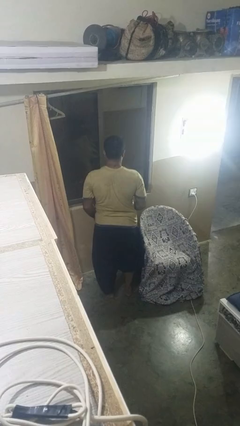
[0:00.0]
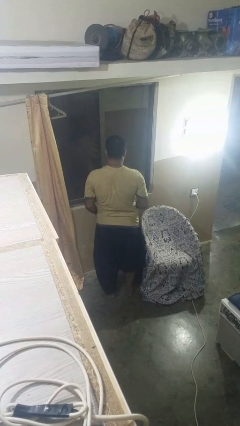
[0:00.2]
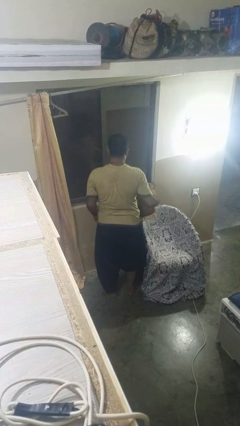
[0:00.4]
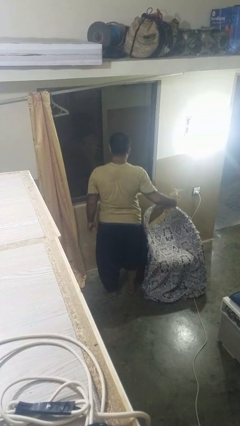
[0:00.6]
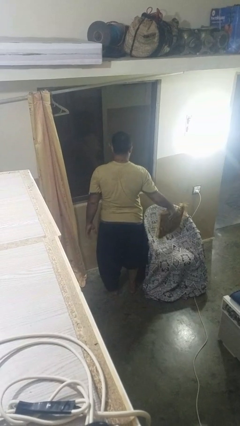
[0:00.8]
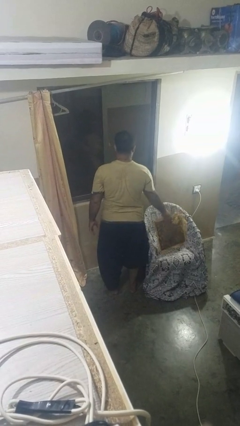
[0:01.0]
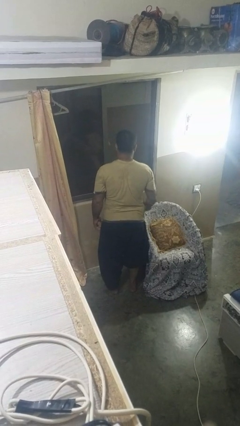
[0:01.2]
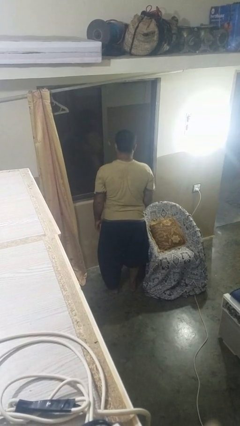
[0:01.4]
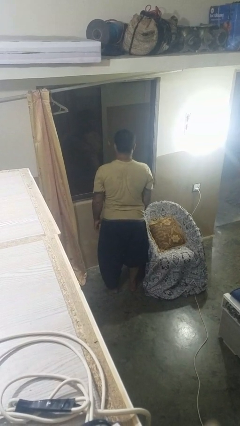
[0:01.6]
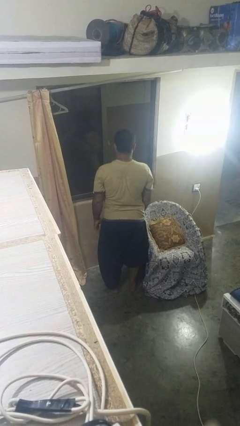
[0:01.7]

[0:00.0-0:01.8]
person puts down object on couch

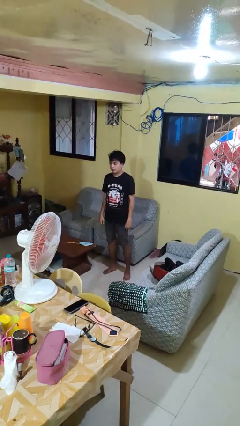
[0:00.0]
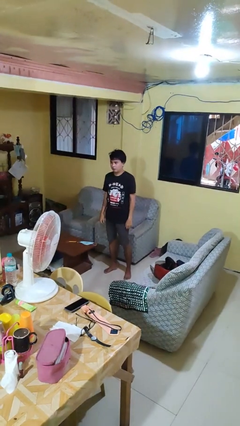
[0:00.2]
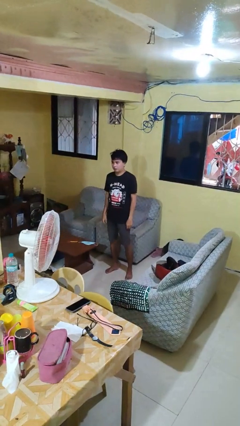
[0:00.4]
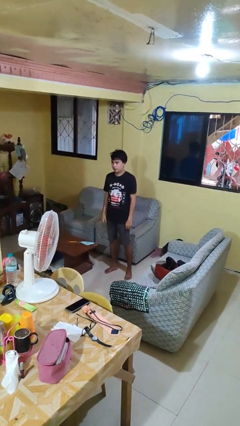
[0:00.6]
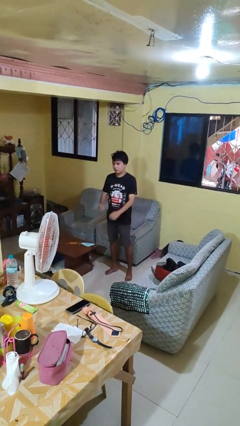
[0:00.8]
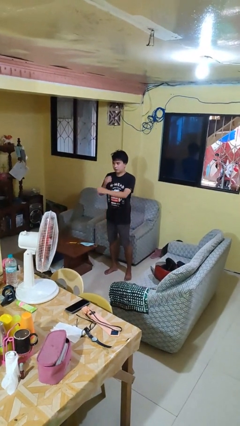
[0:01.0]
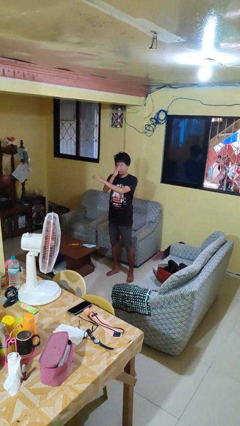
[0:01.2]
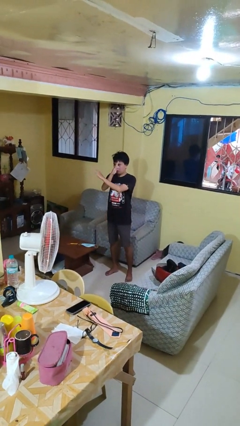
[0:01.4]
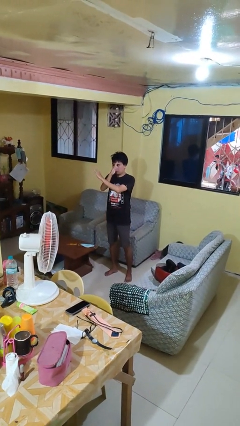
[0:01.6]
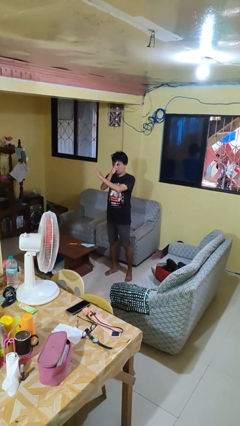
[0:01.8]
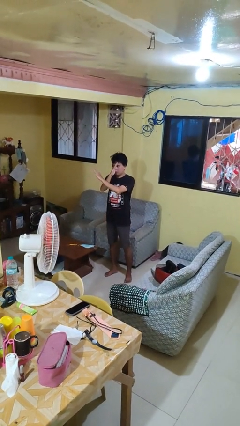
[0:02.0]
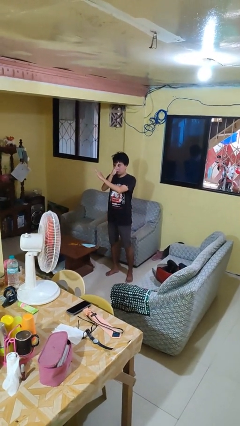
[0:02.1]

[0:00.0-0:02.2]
person gestures arms x

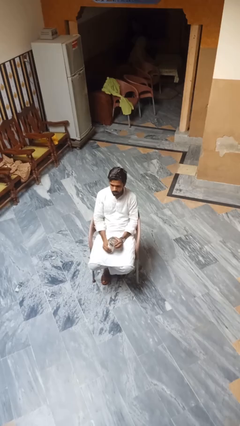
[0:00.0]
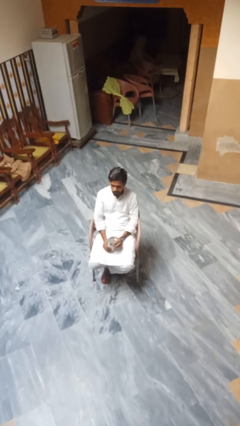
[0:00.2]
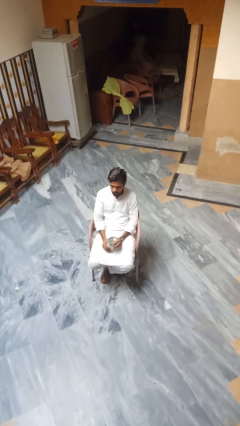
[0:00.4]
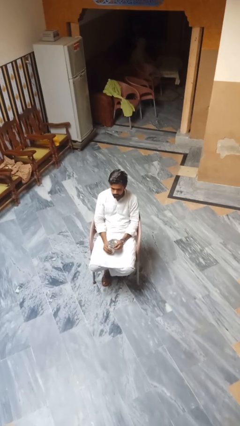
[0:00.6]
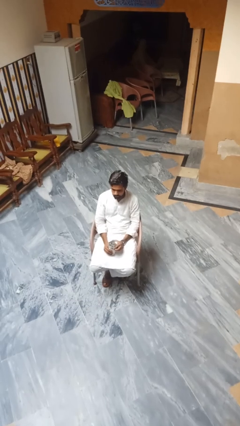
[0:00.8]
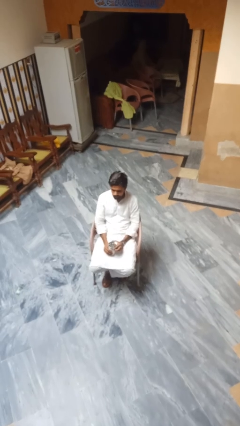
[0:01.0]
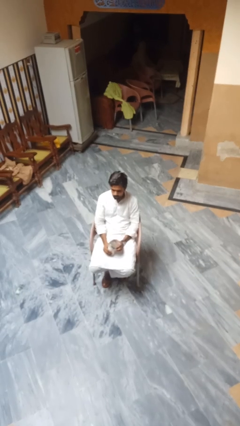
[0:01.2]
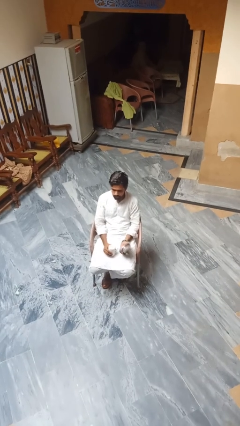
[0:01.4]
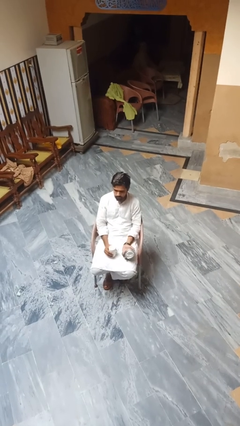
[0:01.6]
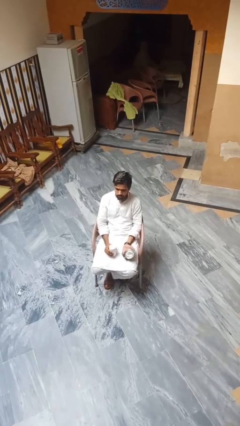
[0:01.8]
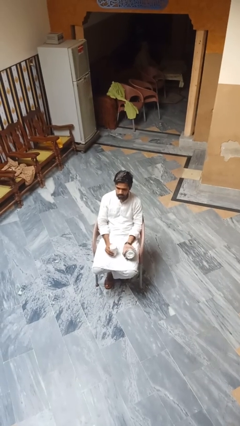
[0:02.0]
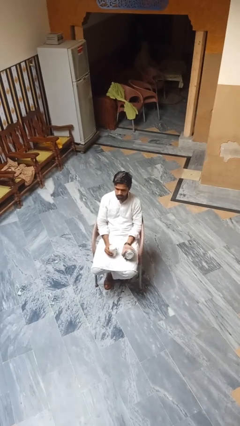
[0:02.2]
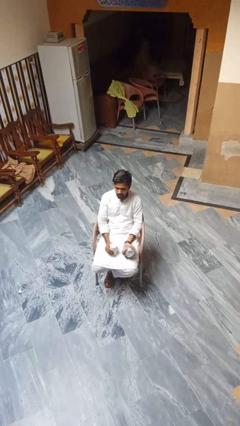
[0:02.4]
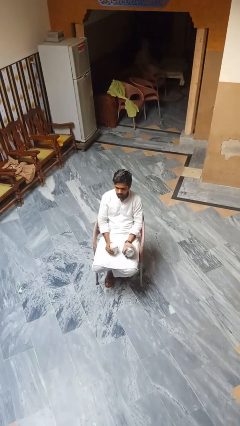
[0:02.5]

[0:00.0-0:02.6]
person opens beverage can

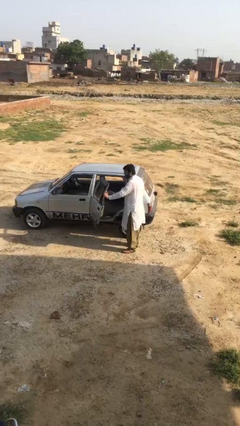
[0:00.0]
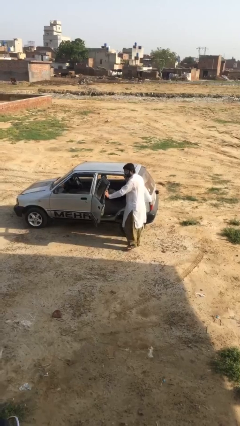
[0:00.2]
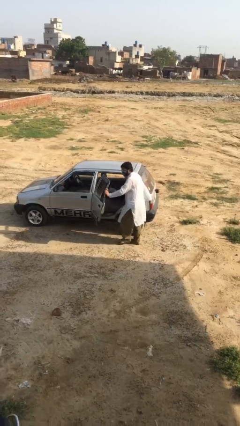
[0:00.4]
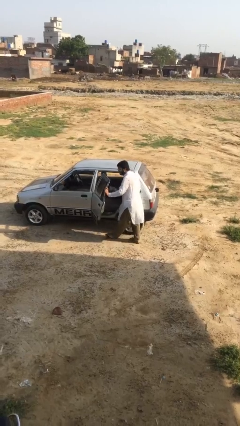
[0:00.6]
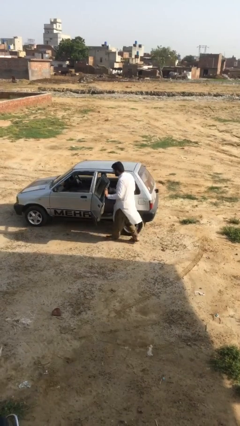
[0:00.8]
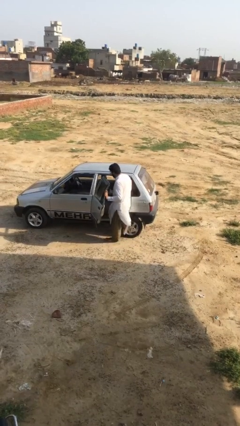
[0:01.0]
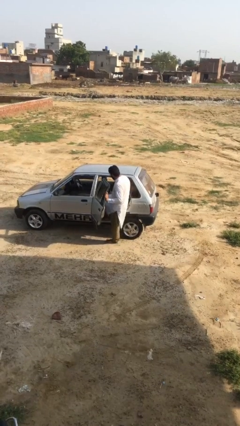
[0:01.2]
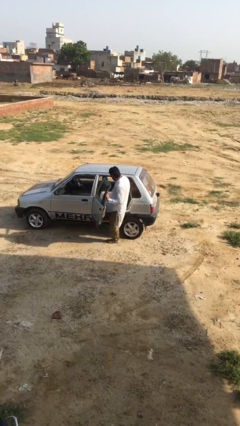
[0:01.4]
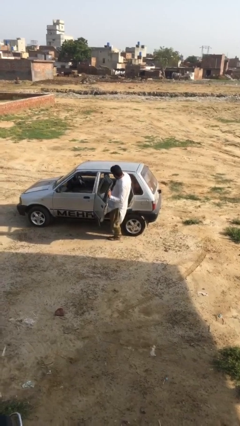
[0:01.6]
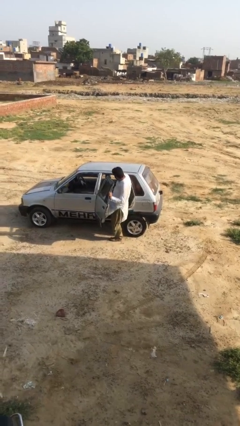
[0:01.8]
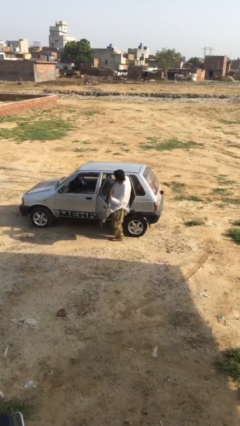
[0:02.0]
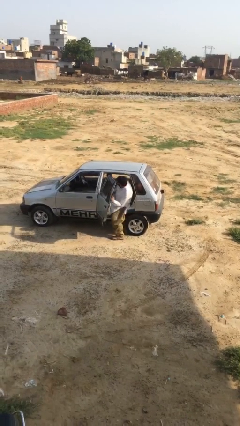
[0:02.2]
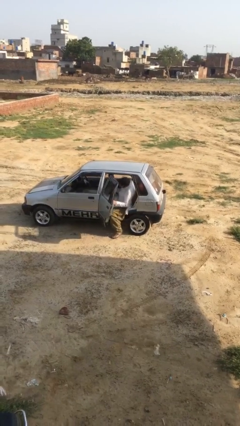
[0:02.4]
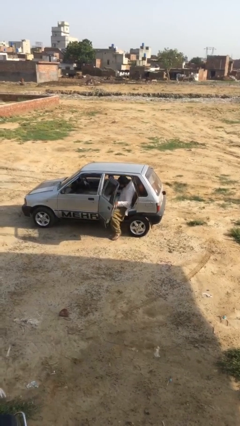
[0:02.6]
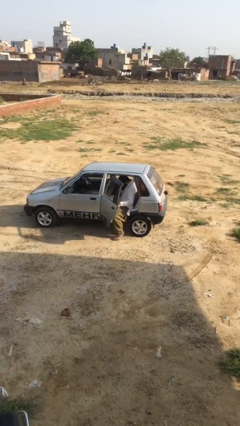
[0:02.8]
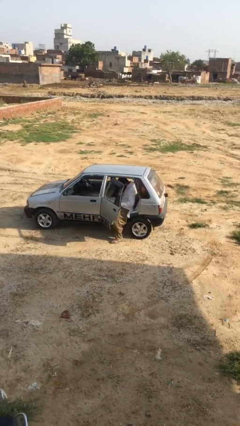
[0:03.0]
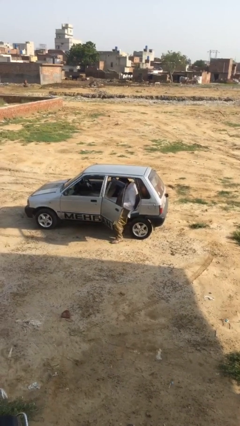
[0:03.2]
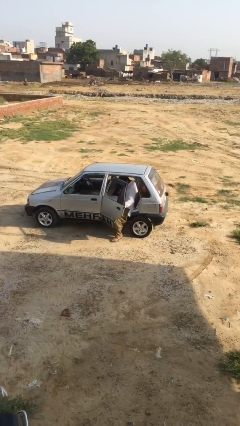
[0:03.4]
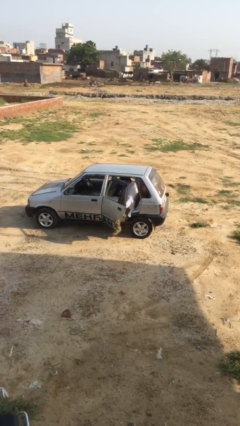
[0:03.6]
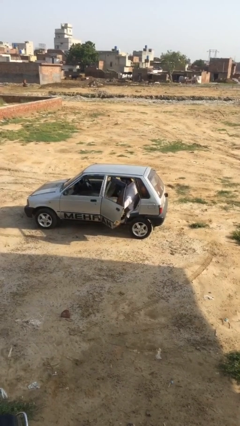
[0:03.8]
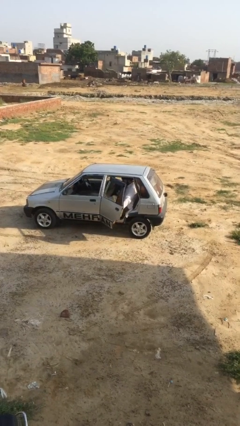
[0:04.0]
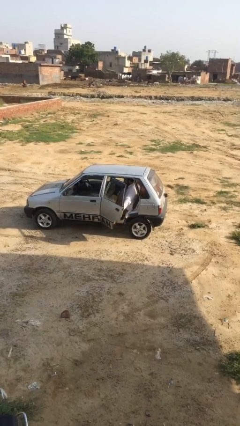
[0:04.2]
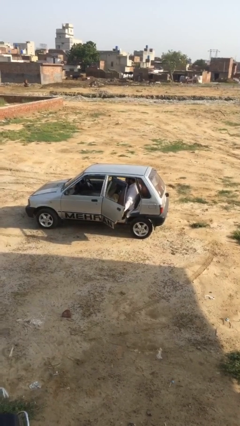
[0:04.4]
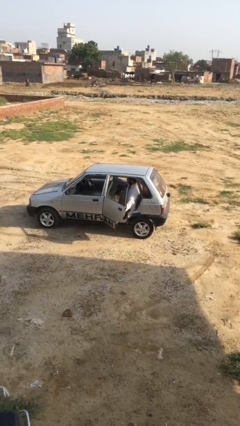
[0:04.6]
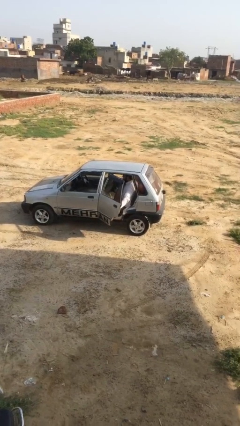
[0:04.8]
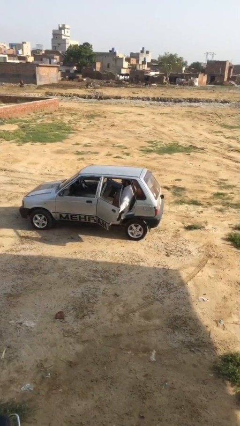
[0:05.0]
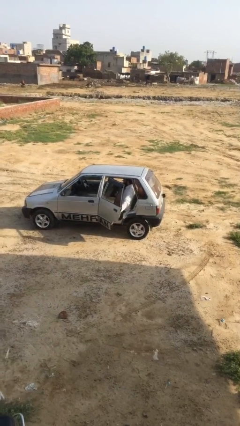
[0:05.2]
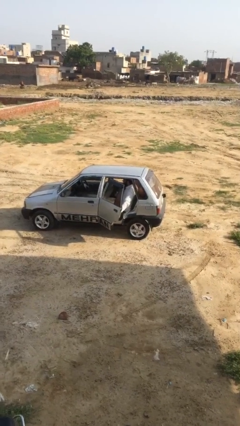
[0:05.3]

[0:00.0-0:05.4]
person enters car

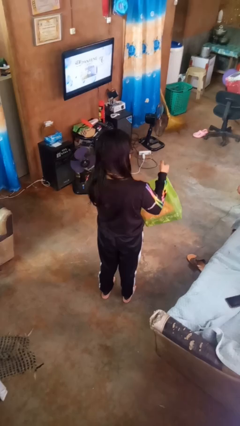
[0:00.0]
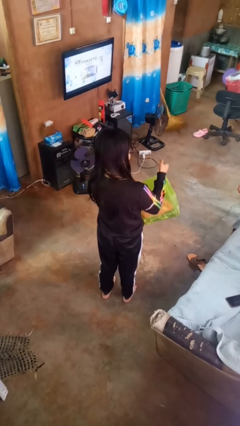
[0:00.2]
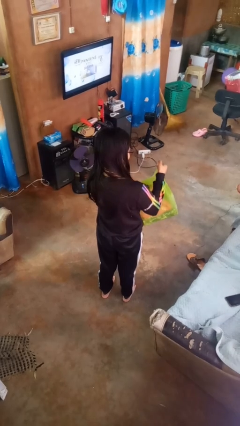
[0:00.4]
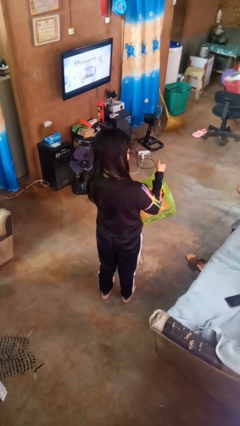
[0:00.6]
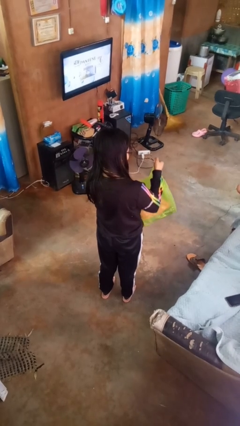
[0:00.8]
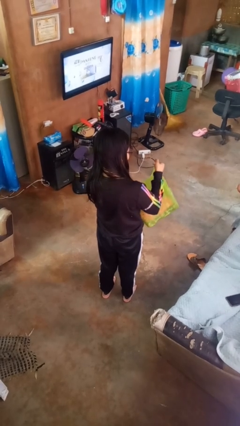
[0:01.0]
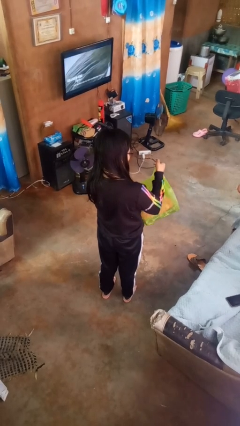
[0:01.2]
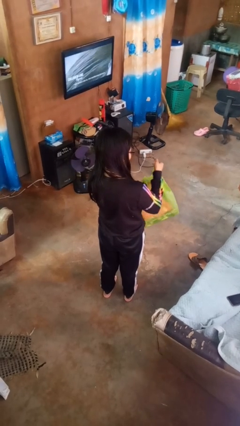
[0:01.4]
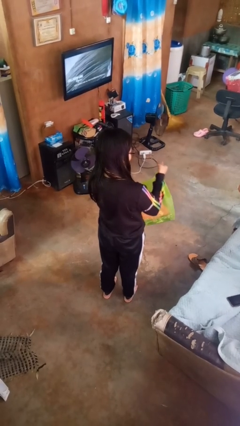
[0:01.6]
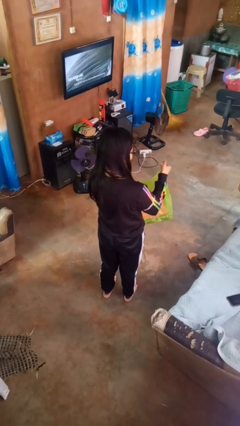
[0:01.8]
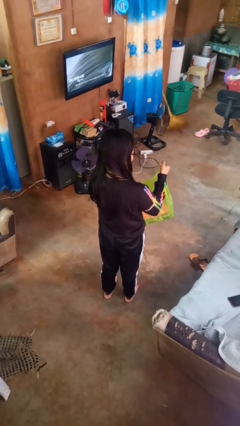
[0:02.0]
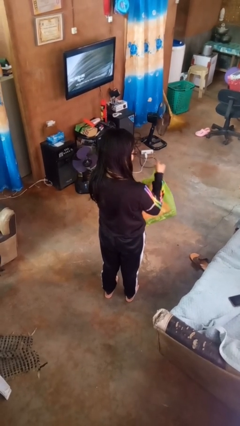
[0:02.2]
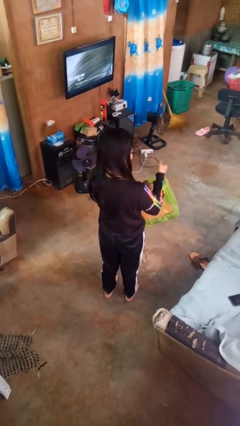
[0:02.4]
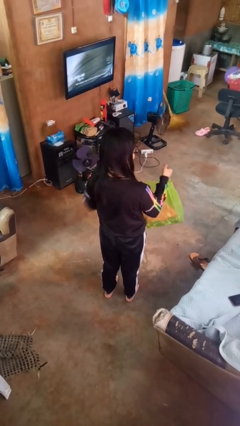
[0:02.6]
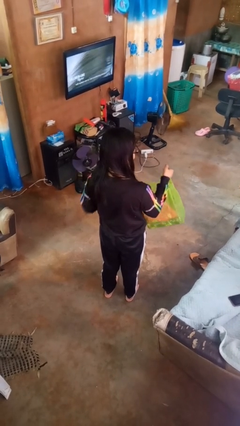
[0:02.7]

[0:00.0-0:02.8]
person searches in bag

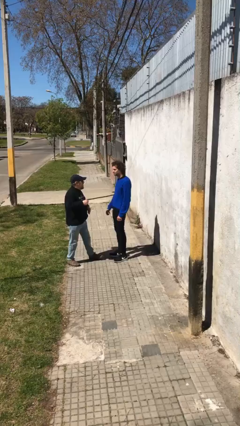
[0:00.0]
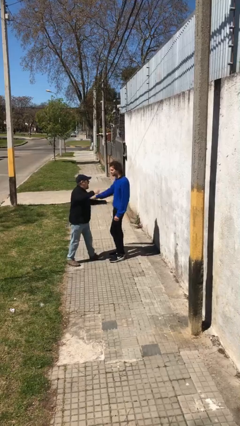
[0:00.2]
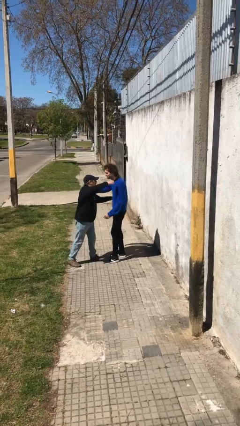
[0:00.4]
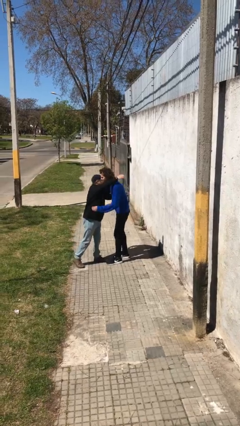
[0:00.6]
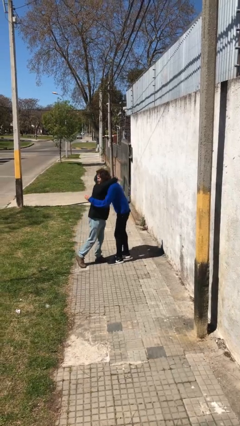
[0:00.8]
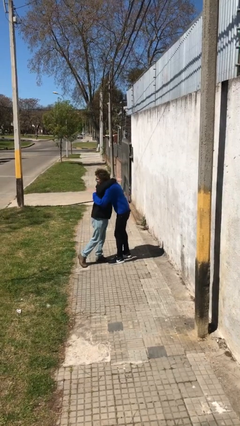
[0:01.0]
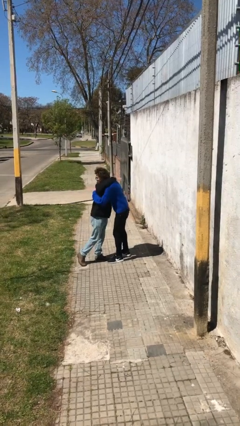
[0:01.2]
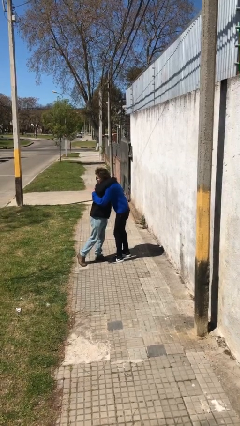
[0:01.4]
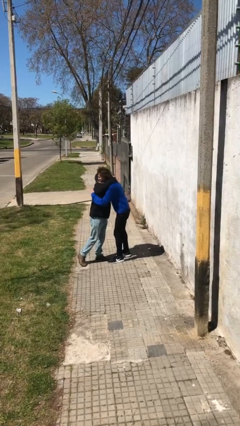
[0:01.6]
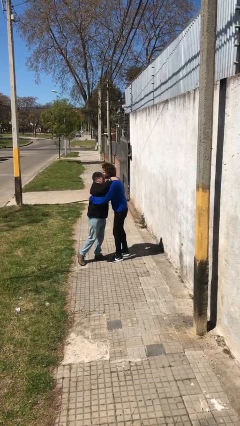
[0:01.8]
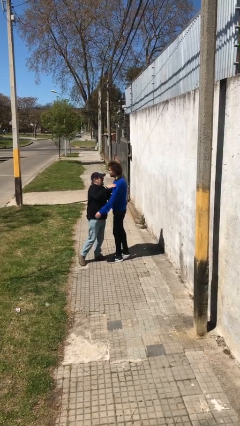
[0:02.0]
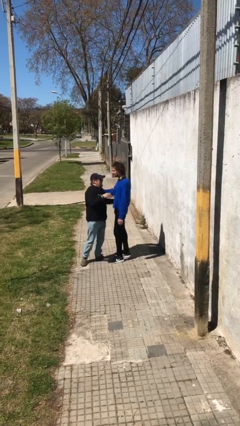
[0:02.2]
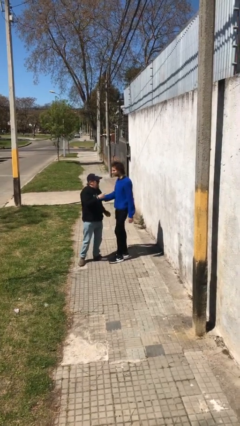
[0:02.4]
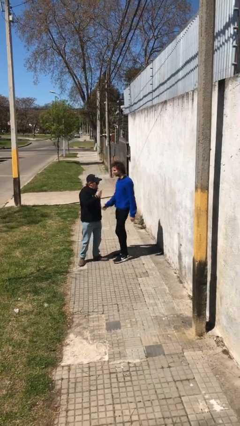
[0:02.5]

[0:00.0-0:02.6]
person embraces person

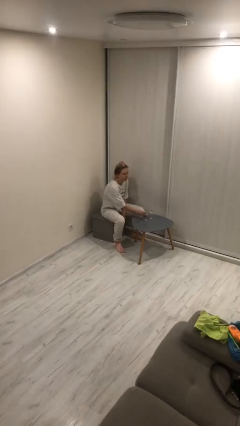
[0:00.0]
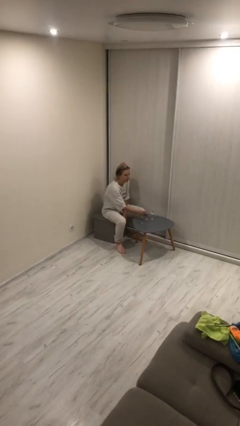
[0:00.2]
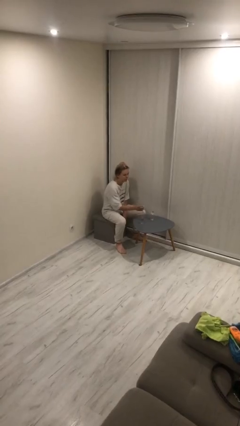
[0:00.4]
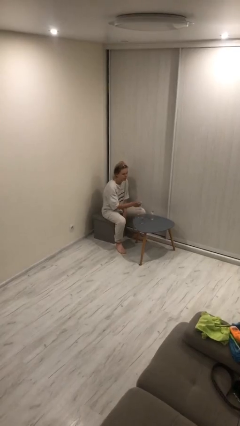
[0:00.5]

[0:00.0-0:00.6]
person picks up object from table
